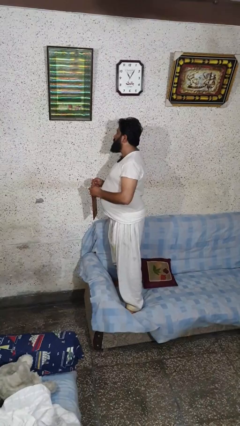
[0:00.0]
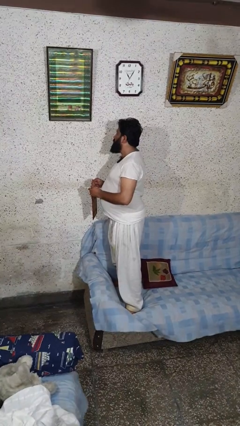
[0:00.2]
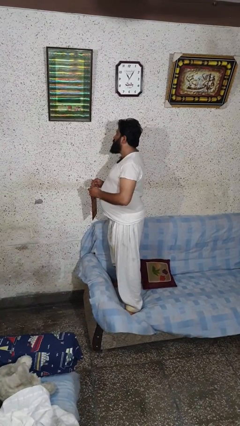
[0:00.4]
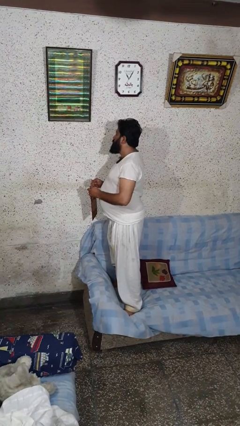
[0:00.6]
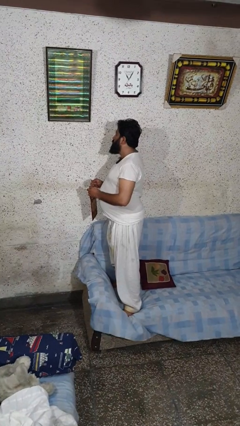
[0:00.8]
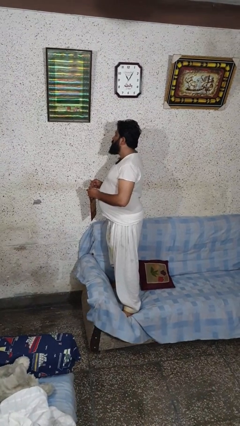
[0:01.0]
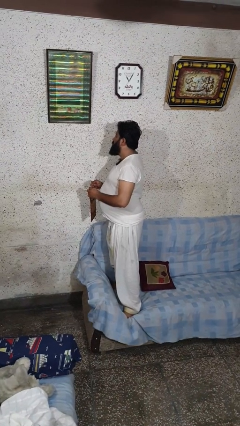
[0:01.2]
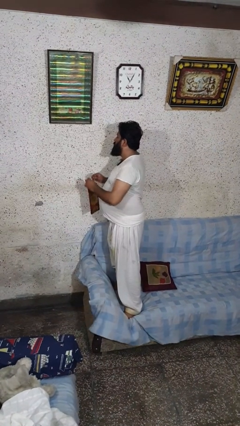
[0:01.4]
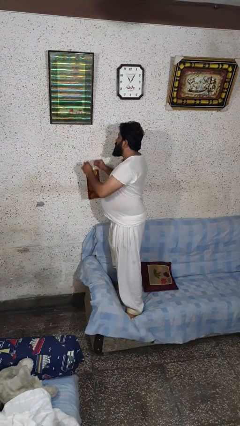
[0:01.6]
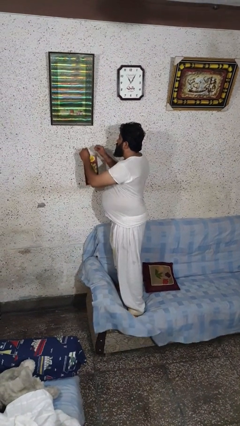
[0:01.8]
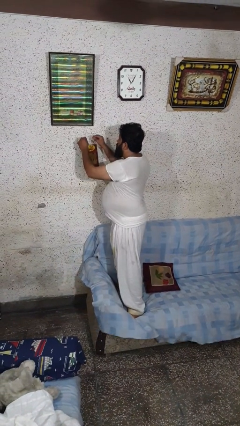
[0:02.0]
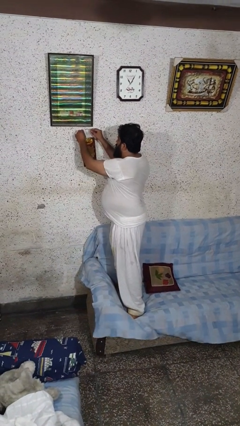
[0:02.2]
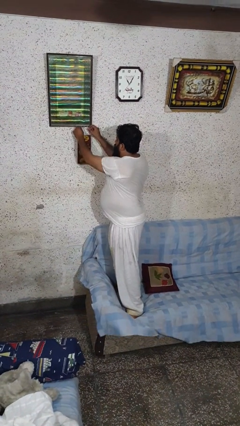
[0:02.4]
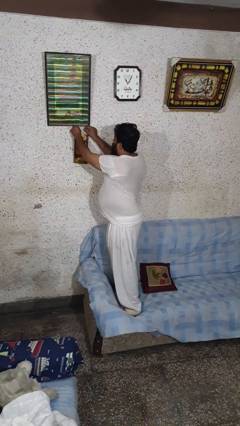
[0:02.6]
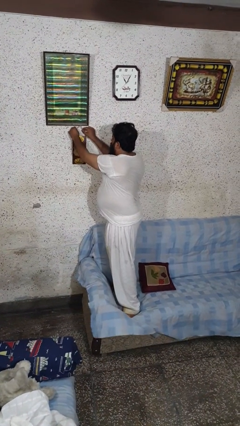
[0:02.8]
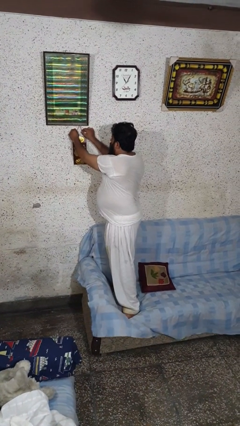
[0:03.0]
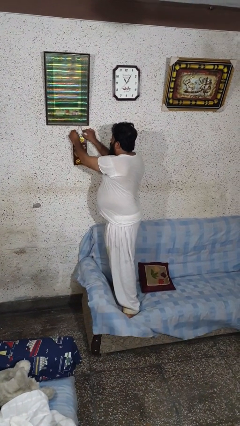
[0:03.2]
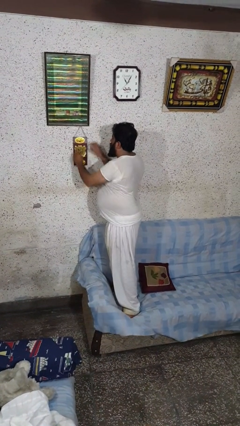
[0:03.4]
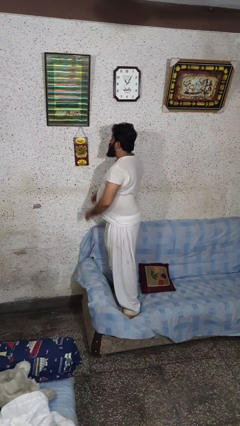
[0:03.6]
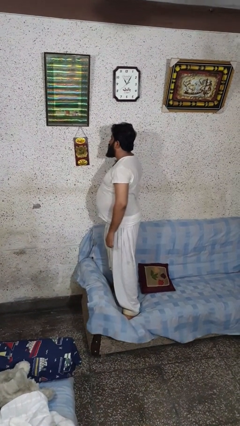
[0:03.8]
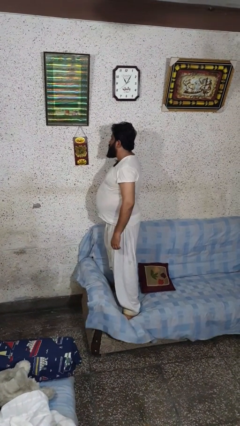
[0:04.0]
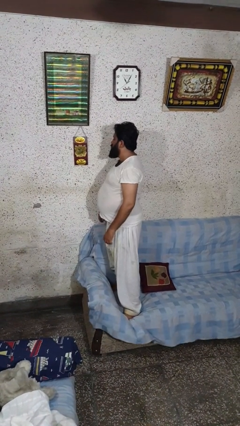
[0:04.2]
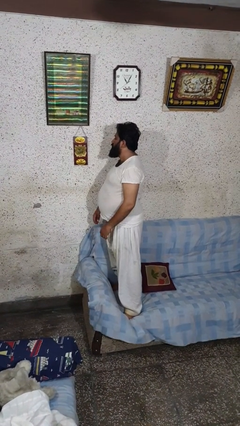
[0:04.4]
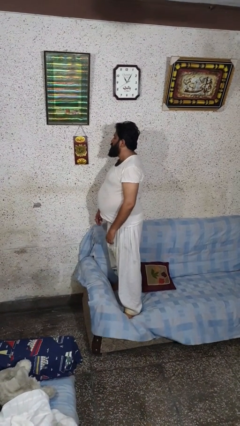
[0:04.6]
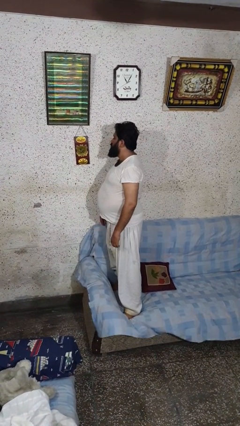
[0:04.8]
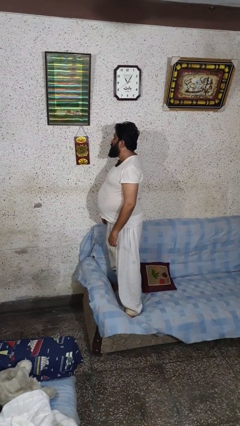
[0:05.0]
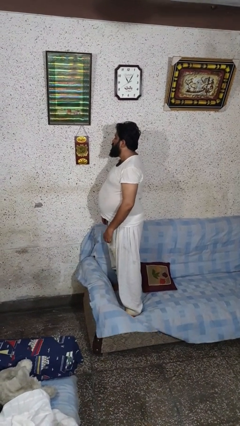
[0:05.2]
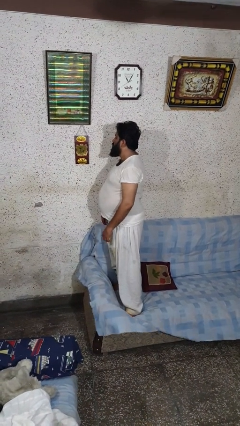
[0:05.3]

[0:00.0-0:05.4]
person puts up picture frame

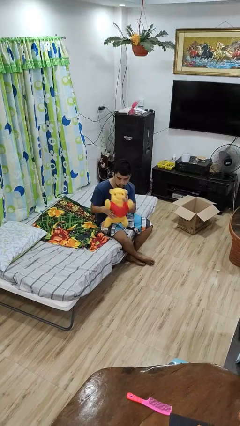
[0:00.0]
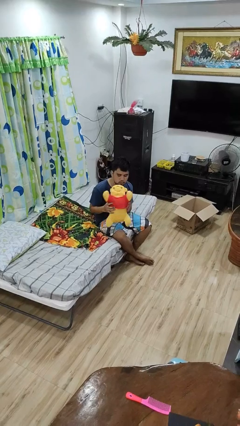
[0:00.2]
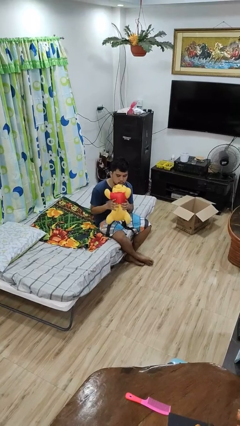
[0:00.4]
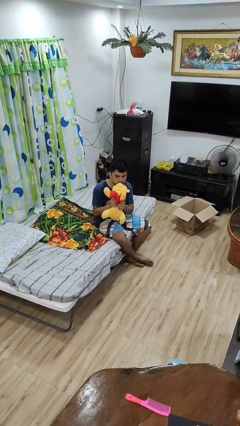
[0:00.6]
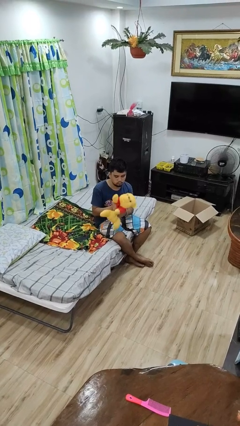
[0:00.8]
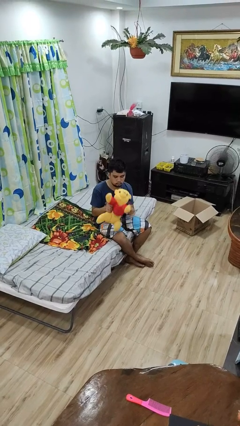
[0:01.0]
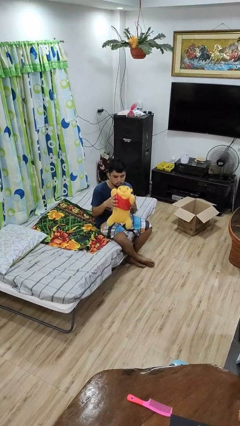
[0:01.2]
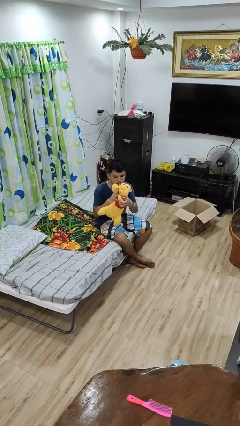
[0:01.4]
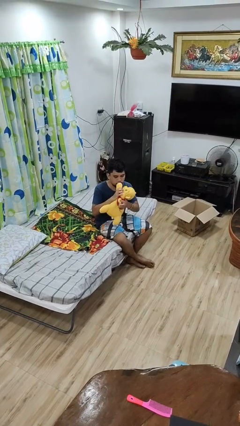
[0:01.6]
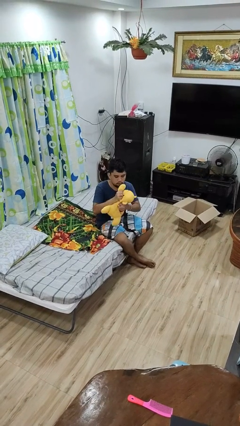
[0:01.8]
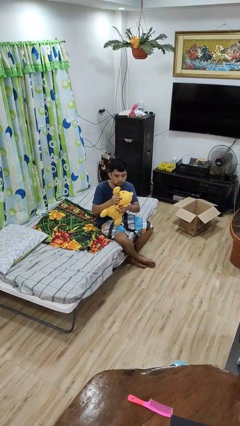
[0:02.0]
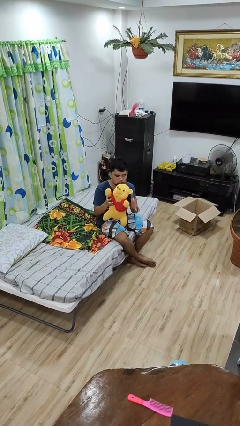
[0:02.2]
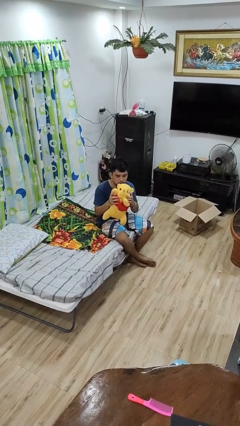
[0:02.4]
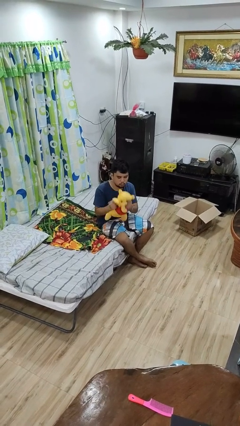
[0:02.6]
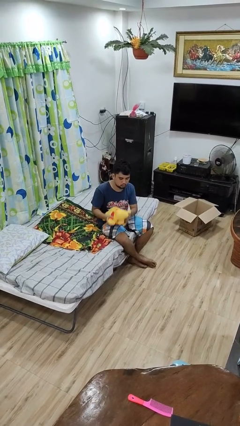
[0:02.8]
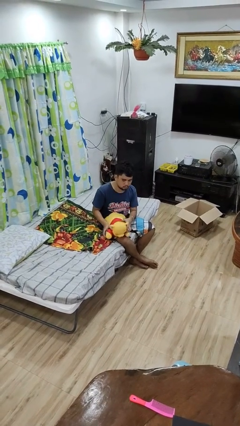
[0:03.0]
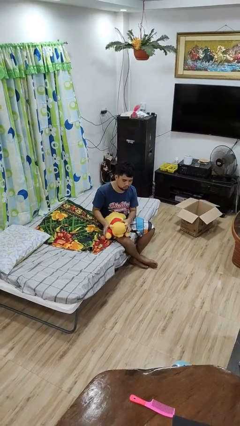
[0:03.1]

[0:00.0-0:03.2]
person squeezes object

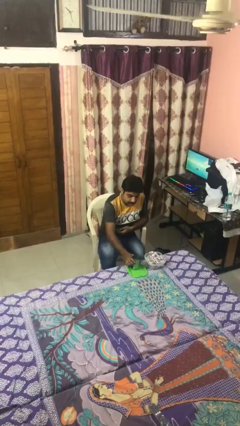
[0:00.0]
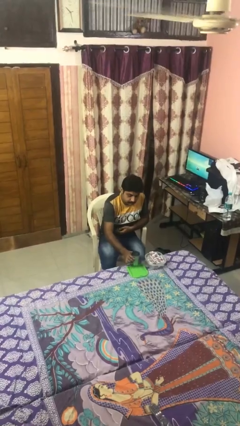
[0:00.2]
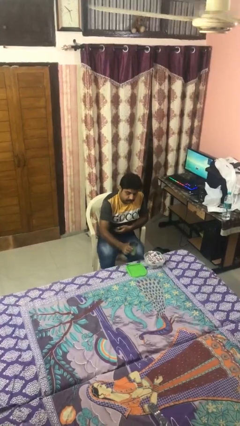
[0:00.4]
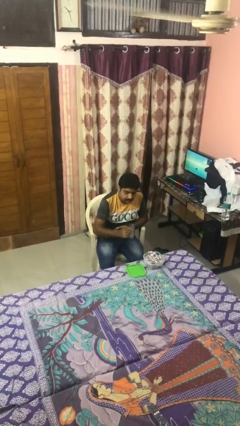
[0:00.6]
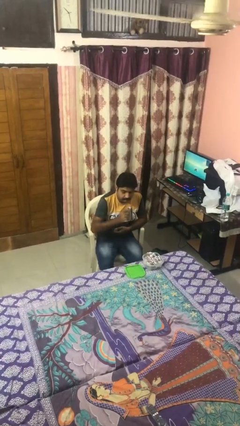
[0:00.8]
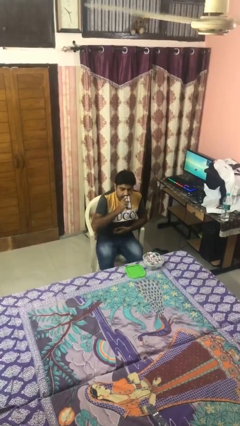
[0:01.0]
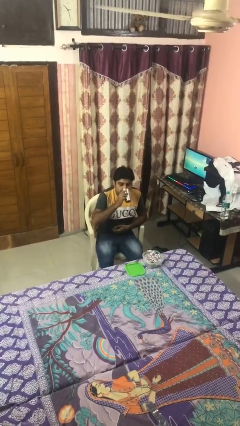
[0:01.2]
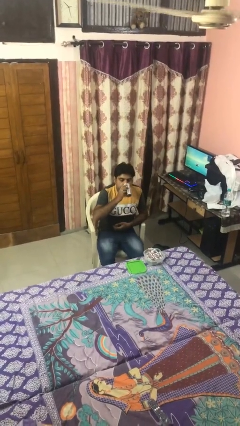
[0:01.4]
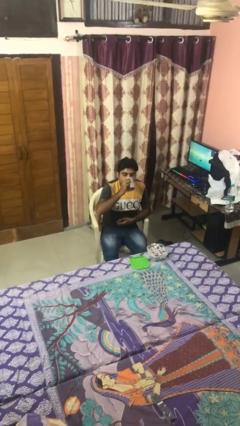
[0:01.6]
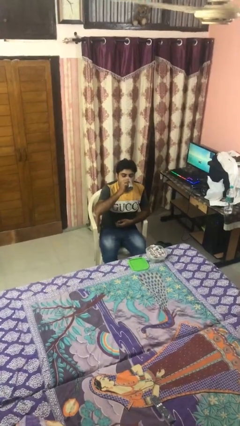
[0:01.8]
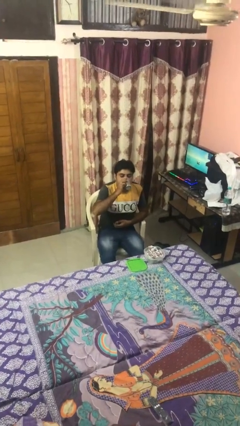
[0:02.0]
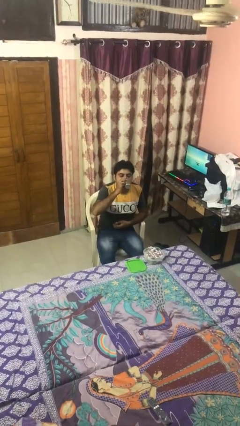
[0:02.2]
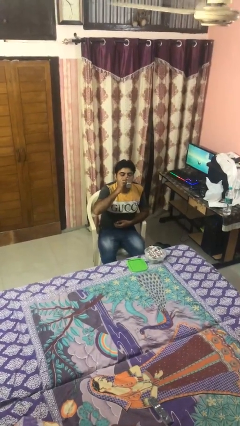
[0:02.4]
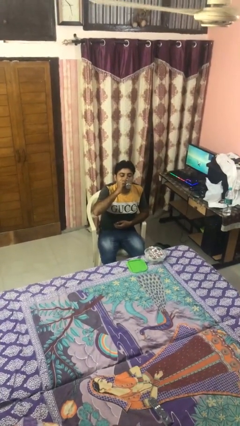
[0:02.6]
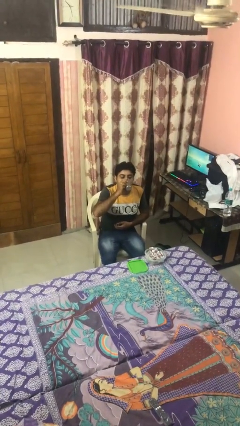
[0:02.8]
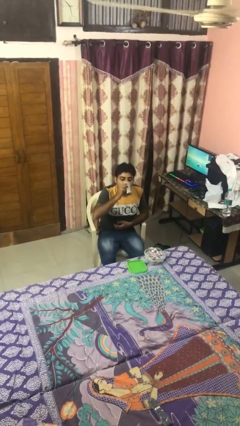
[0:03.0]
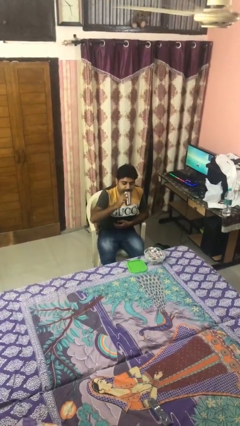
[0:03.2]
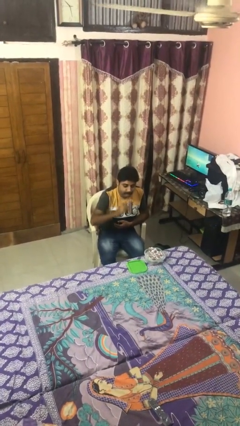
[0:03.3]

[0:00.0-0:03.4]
person drinks from cup

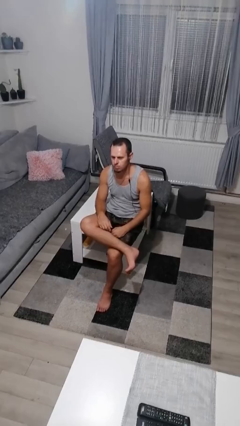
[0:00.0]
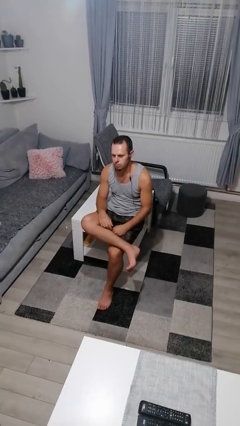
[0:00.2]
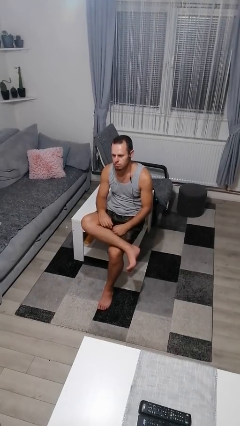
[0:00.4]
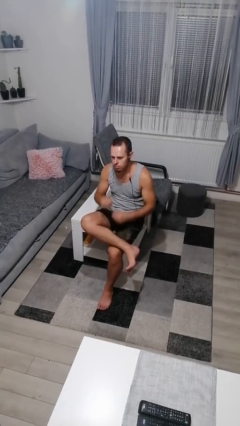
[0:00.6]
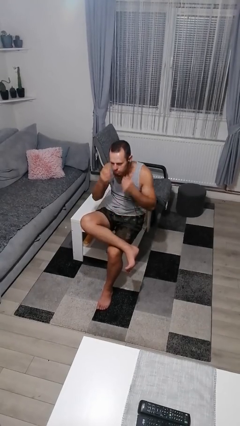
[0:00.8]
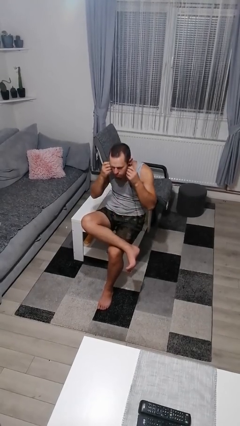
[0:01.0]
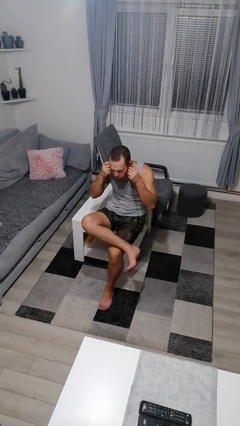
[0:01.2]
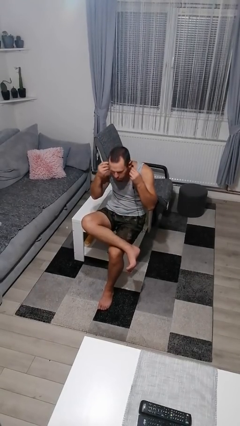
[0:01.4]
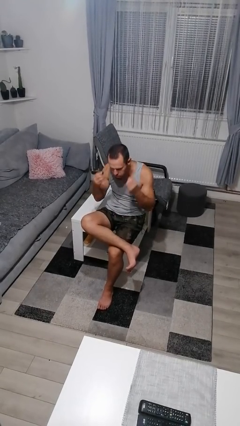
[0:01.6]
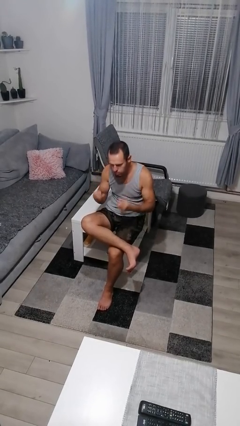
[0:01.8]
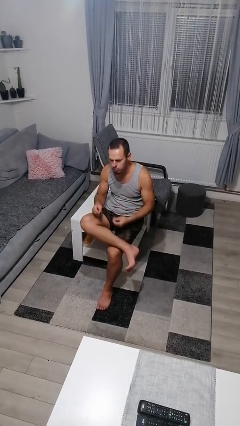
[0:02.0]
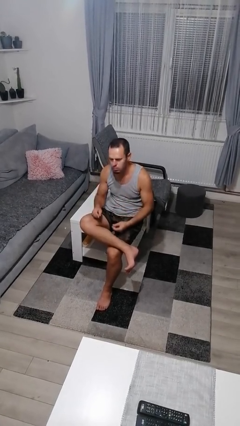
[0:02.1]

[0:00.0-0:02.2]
person takes off headphones

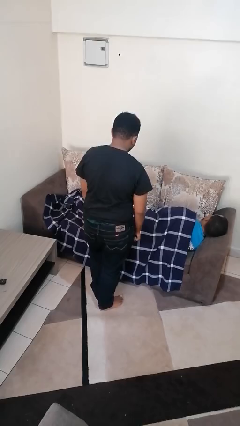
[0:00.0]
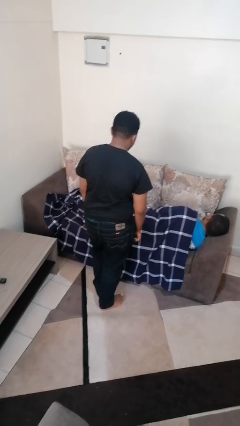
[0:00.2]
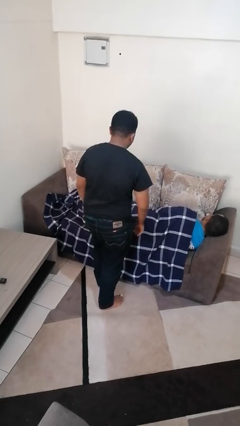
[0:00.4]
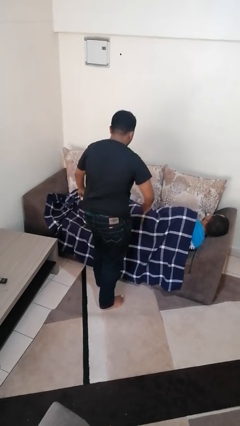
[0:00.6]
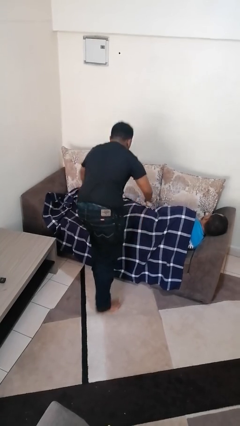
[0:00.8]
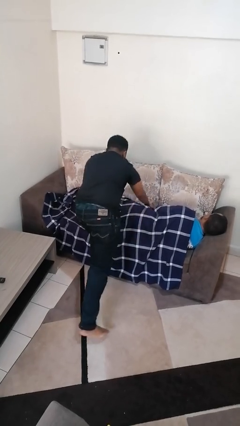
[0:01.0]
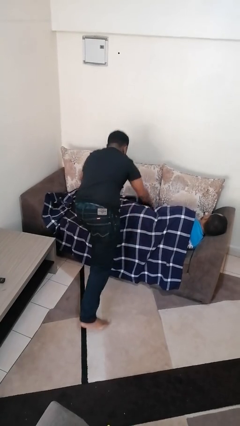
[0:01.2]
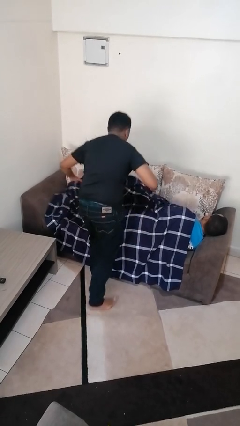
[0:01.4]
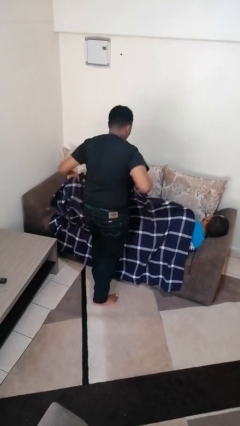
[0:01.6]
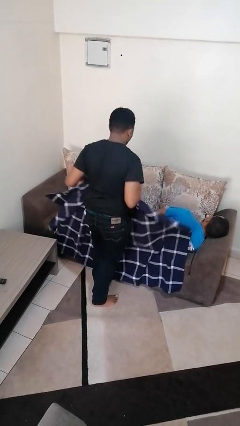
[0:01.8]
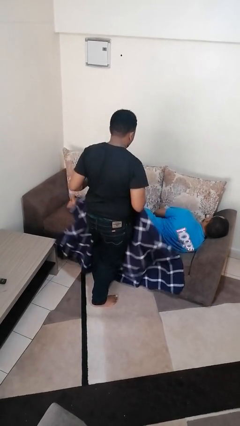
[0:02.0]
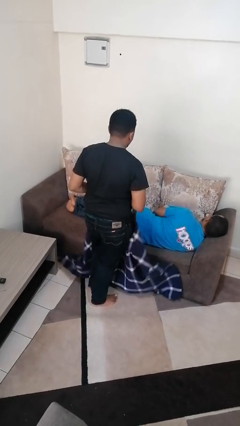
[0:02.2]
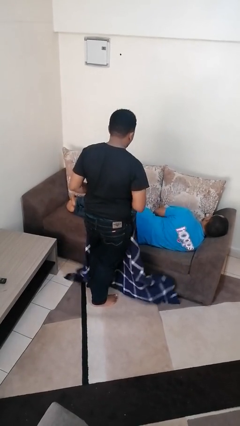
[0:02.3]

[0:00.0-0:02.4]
person uncovers friend with blanket
